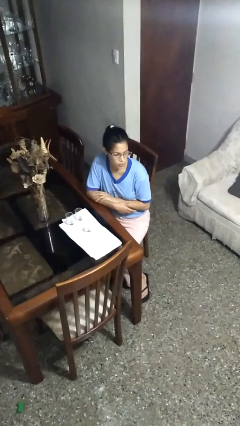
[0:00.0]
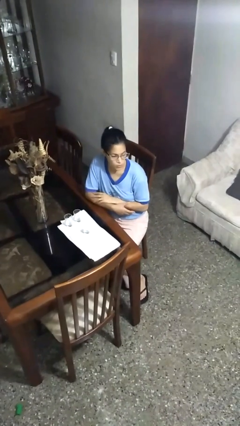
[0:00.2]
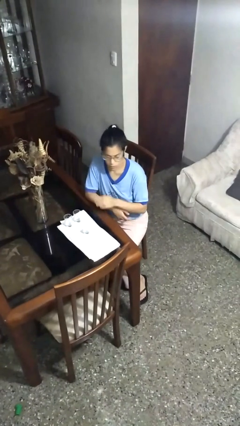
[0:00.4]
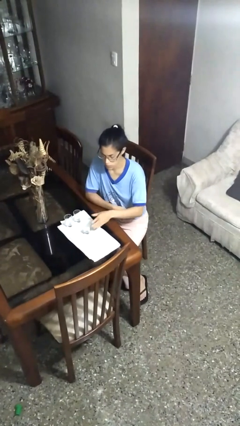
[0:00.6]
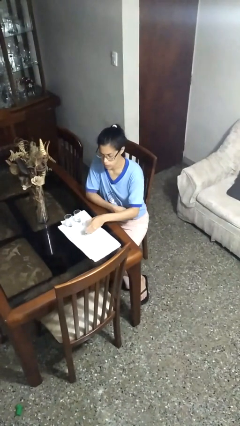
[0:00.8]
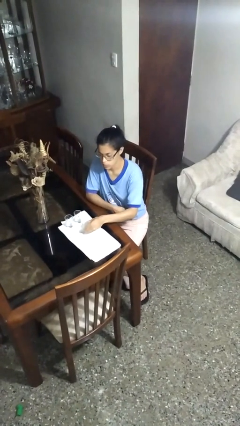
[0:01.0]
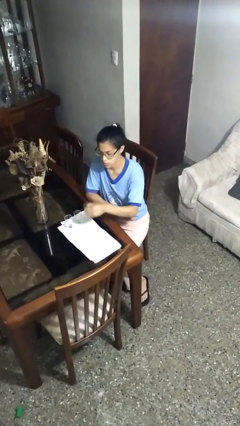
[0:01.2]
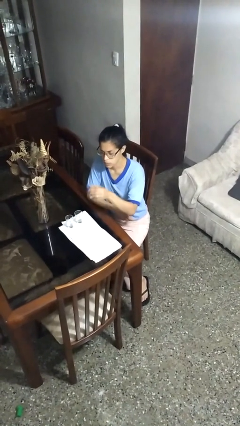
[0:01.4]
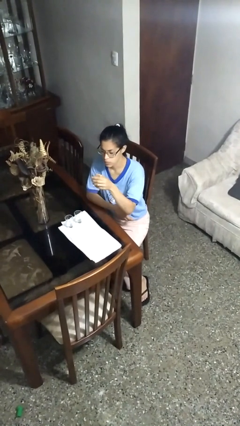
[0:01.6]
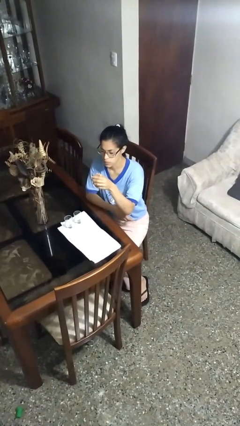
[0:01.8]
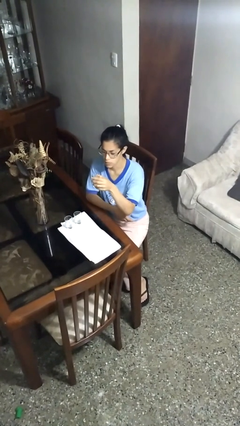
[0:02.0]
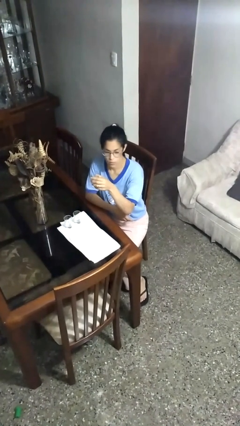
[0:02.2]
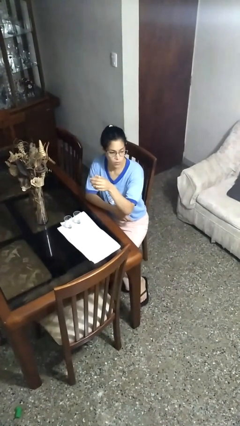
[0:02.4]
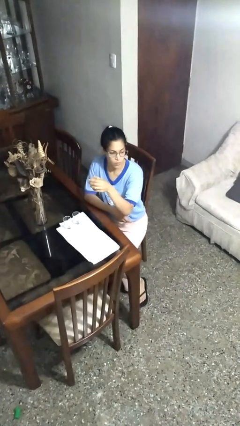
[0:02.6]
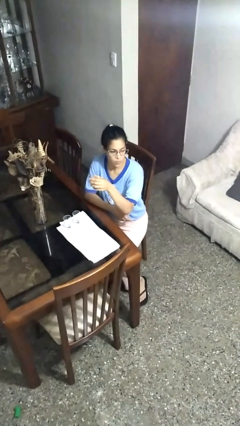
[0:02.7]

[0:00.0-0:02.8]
person picks up object from table

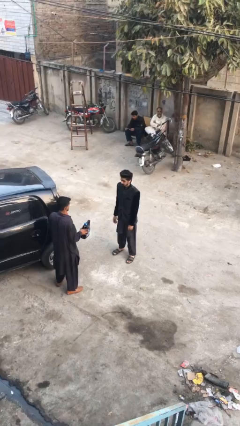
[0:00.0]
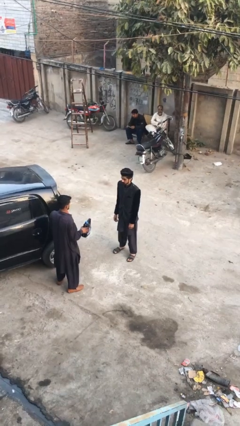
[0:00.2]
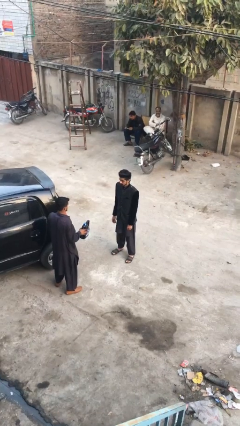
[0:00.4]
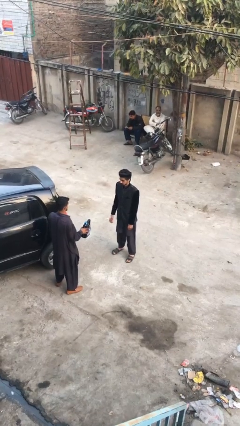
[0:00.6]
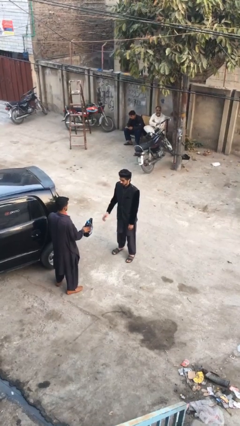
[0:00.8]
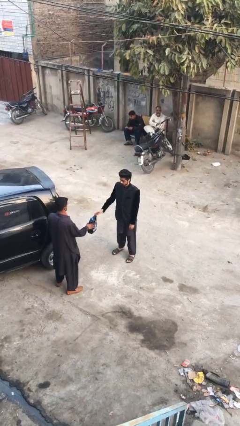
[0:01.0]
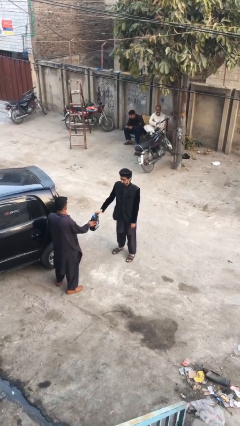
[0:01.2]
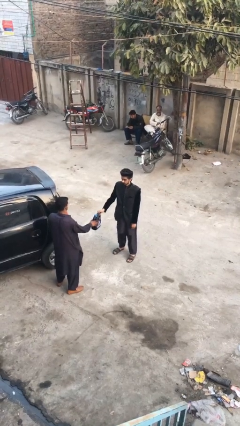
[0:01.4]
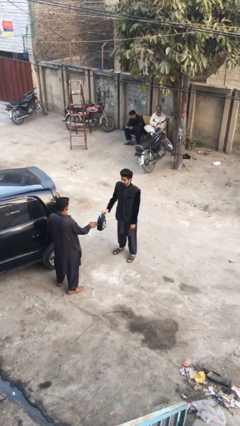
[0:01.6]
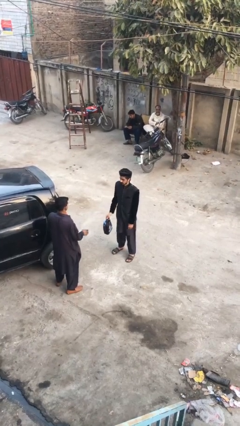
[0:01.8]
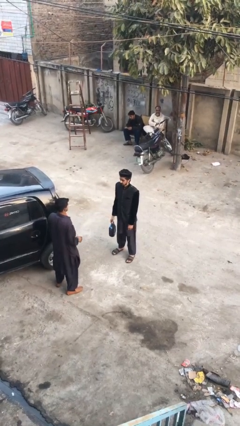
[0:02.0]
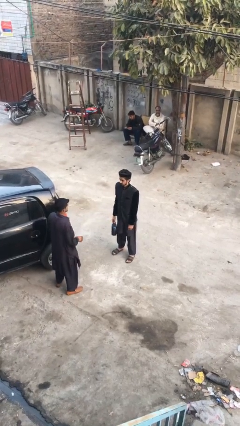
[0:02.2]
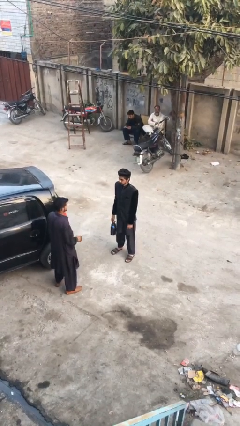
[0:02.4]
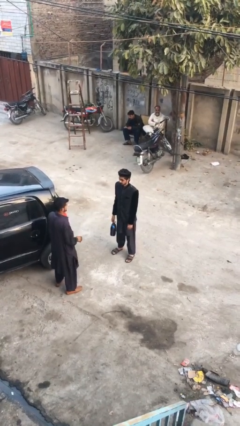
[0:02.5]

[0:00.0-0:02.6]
person transfers object to person

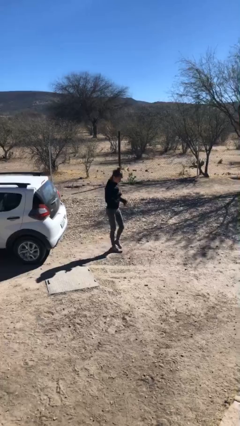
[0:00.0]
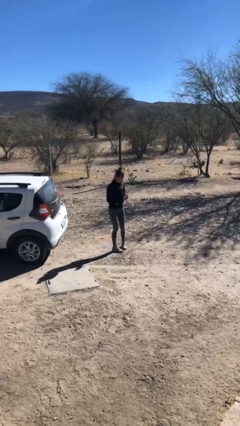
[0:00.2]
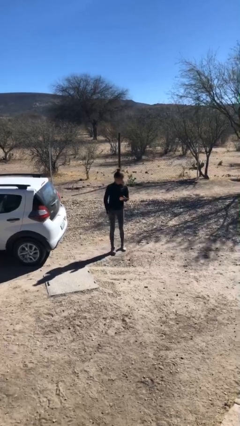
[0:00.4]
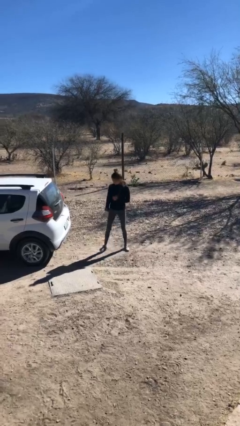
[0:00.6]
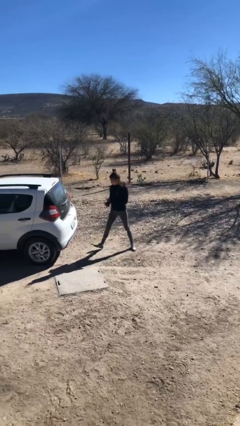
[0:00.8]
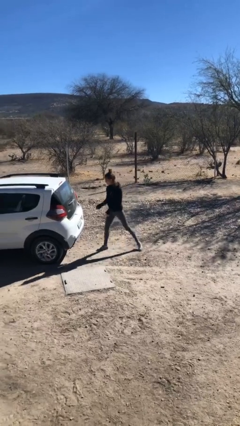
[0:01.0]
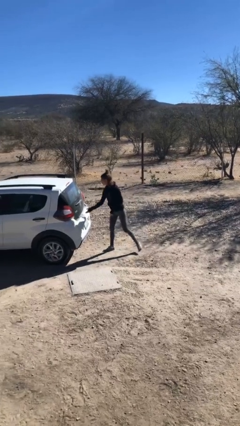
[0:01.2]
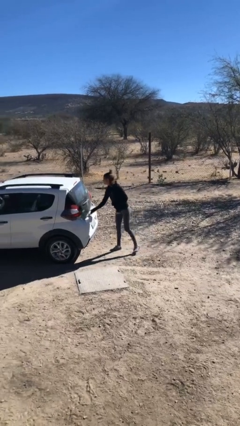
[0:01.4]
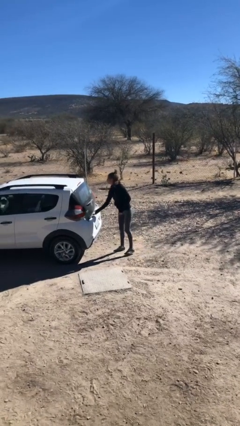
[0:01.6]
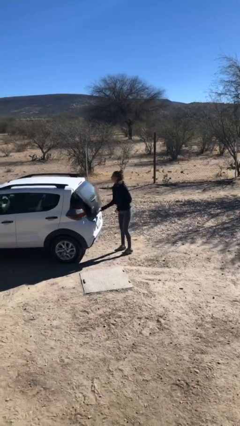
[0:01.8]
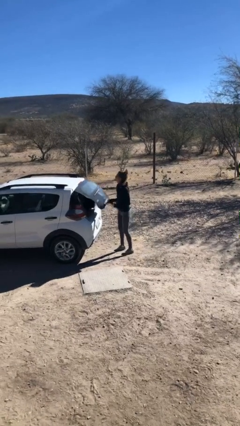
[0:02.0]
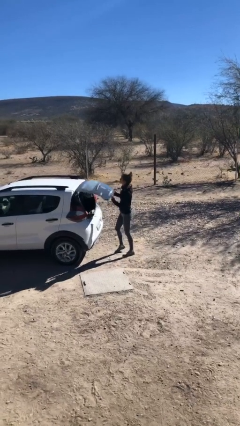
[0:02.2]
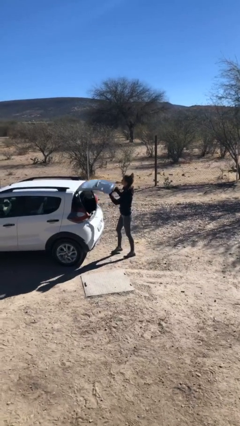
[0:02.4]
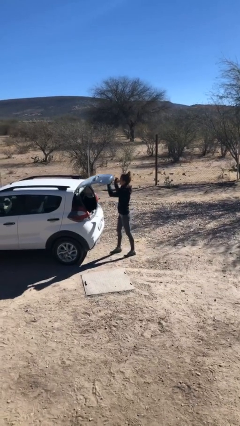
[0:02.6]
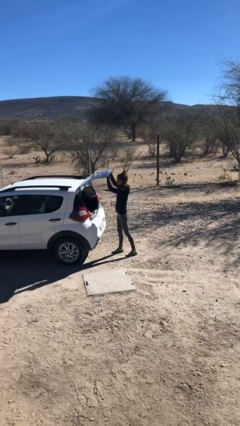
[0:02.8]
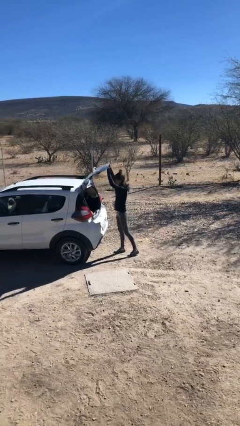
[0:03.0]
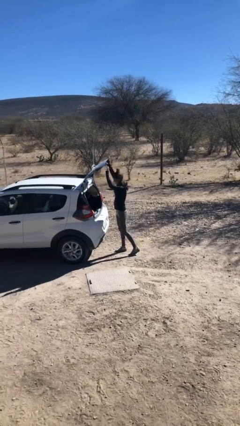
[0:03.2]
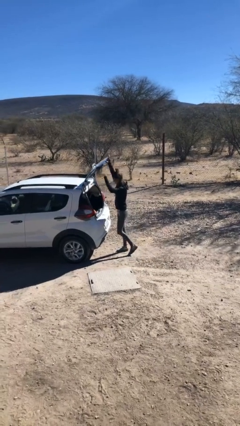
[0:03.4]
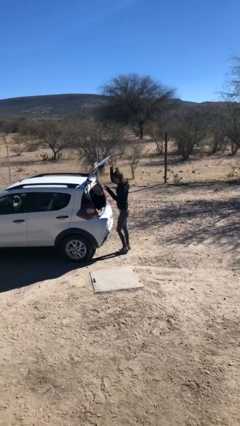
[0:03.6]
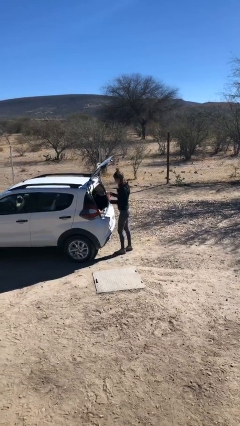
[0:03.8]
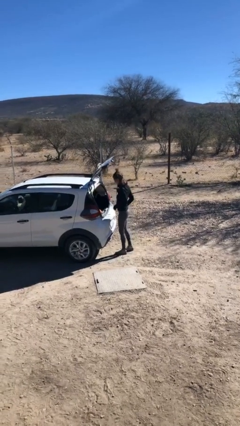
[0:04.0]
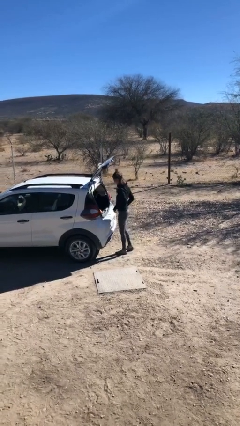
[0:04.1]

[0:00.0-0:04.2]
person opens car trunk

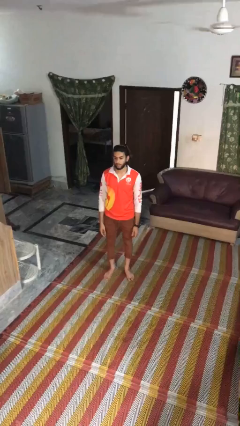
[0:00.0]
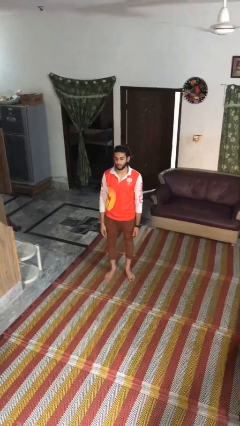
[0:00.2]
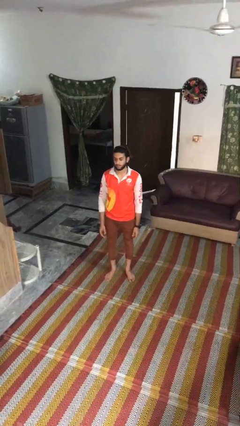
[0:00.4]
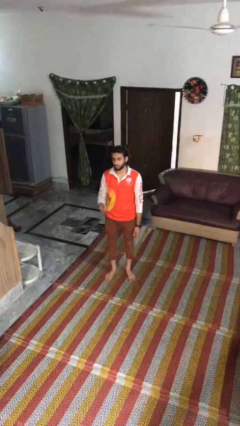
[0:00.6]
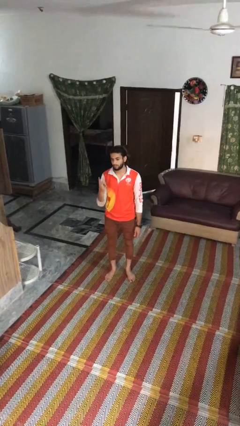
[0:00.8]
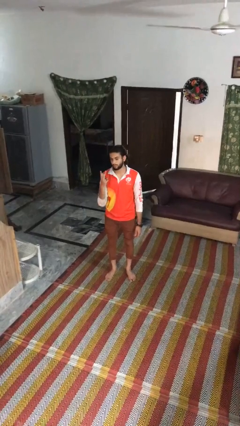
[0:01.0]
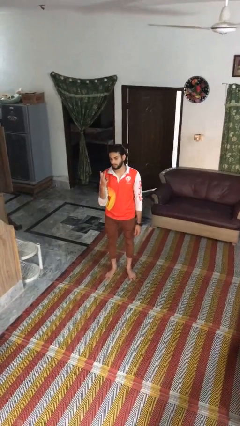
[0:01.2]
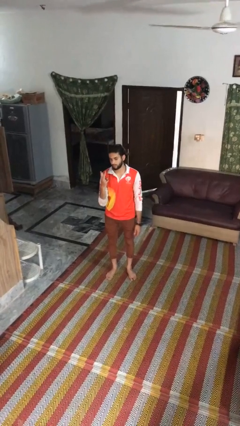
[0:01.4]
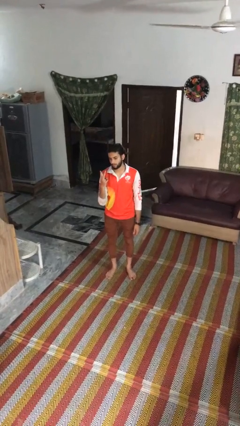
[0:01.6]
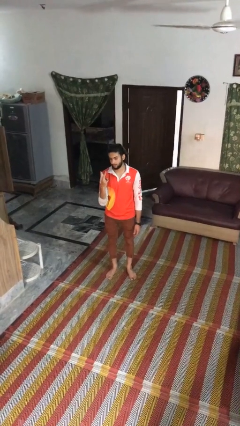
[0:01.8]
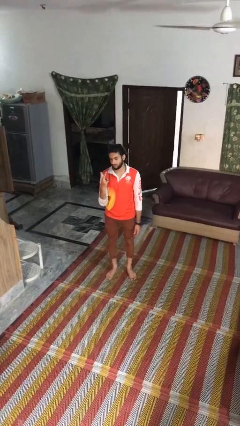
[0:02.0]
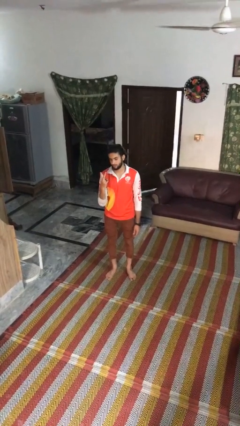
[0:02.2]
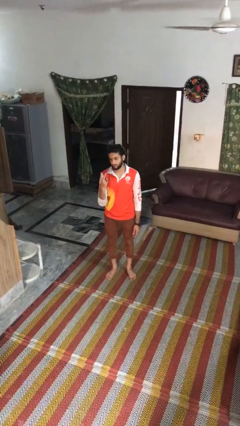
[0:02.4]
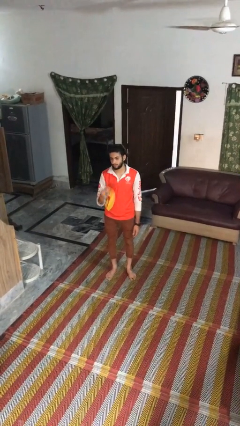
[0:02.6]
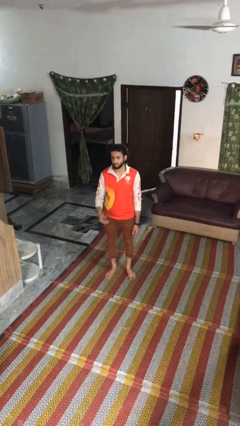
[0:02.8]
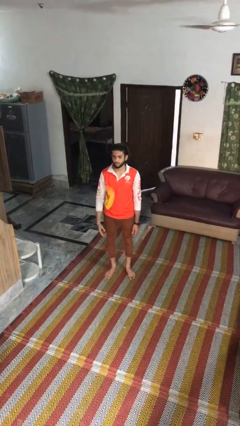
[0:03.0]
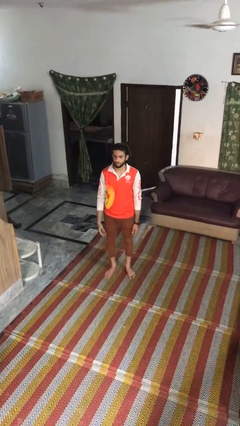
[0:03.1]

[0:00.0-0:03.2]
person gestures peace

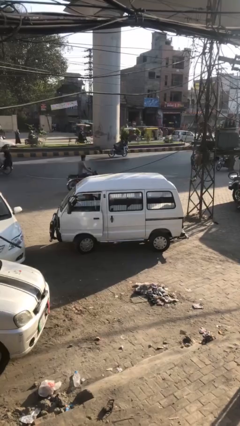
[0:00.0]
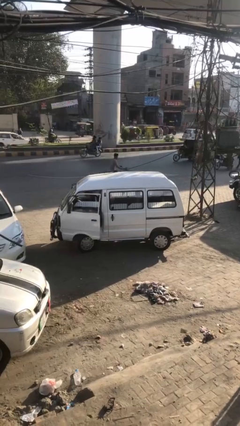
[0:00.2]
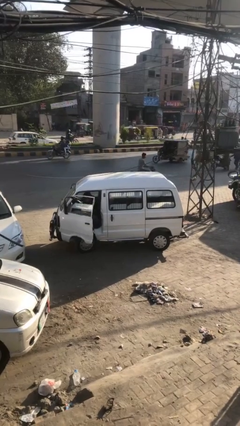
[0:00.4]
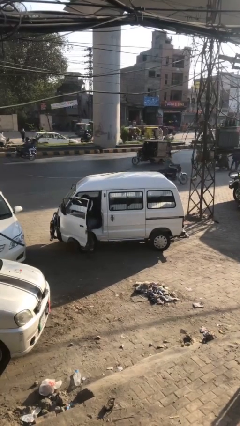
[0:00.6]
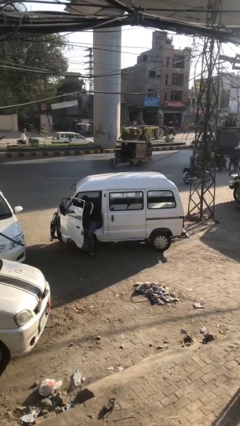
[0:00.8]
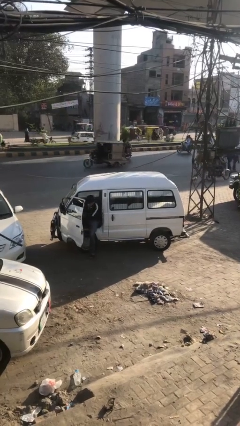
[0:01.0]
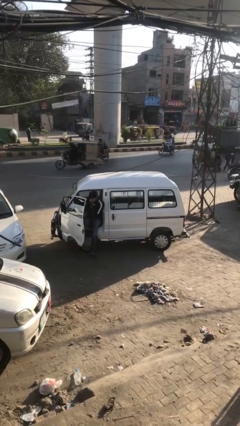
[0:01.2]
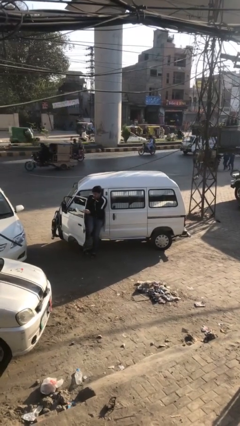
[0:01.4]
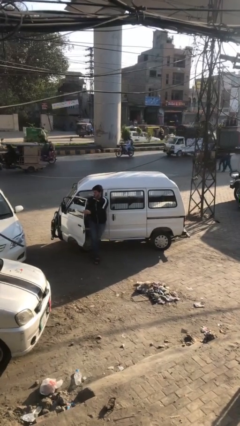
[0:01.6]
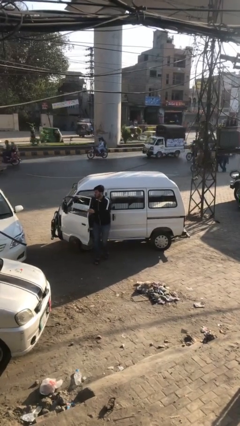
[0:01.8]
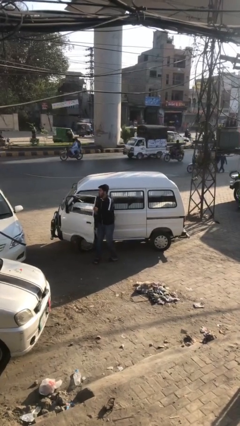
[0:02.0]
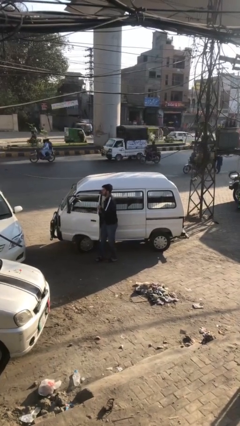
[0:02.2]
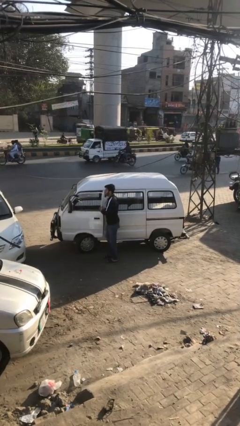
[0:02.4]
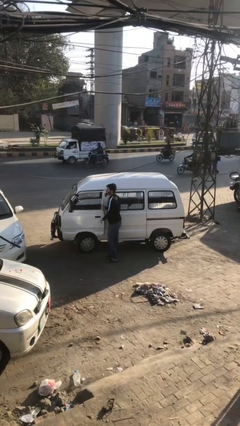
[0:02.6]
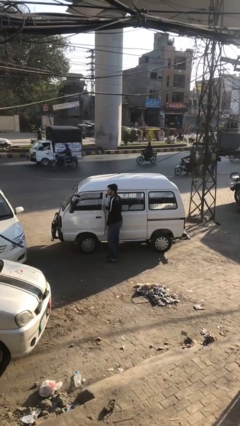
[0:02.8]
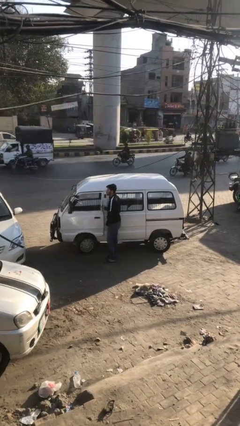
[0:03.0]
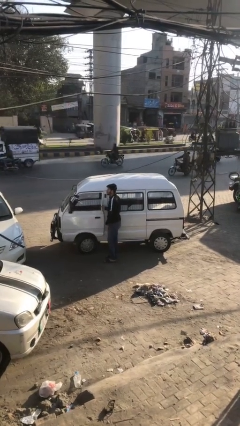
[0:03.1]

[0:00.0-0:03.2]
car drops off person

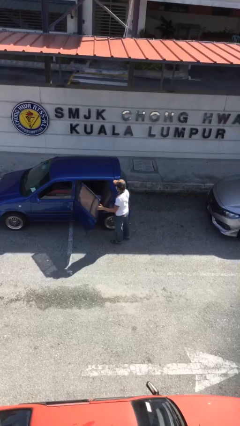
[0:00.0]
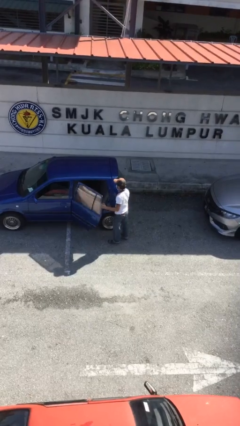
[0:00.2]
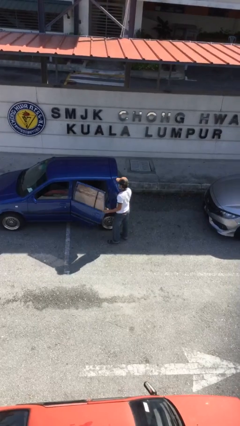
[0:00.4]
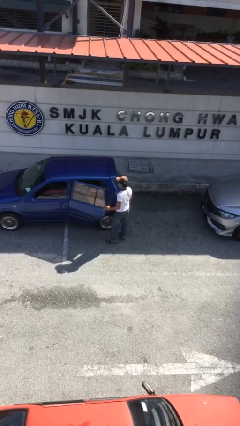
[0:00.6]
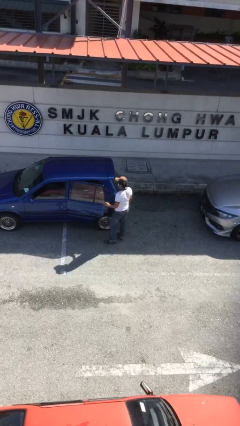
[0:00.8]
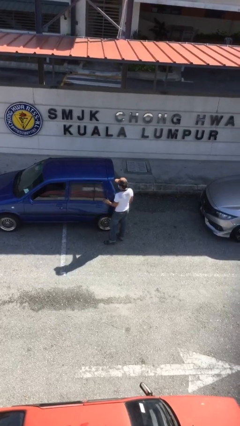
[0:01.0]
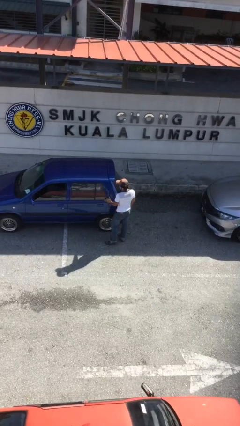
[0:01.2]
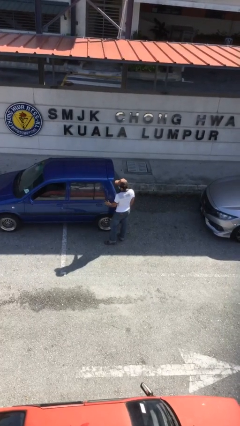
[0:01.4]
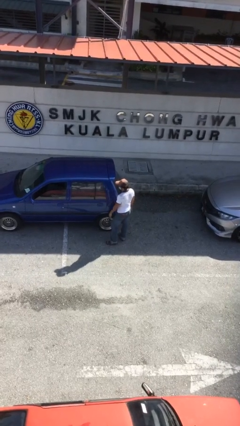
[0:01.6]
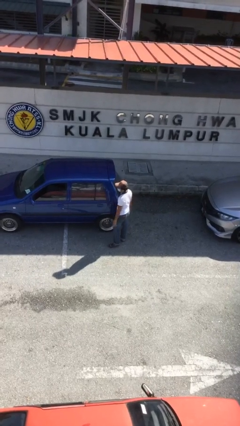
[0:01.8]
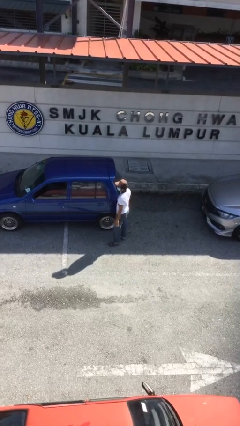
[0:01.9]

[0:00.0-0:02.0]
person closes car door
